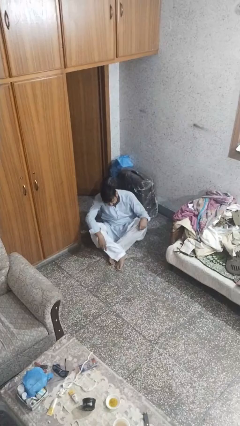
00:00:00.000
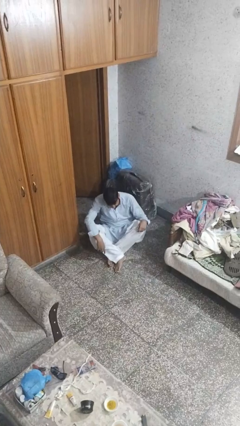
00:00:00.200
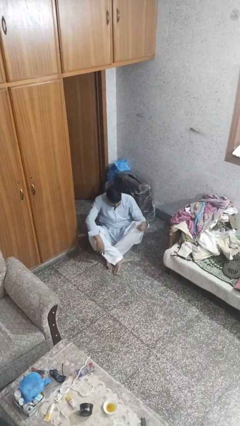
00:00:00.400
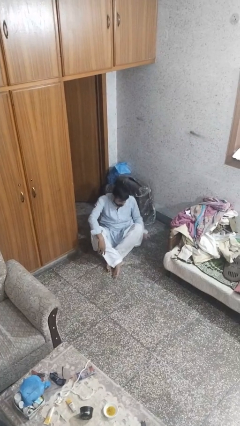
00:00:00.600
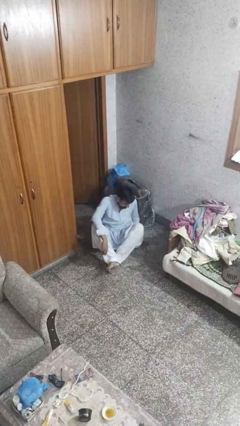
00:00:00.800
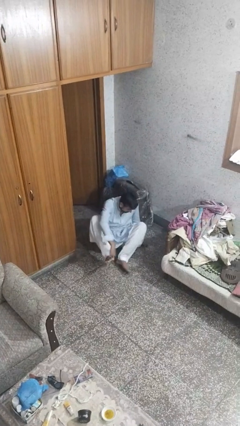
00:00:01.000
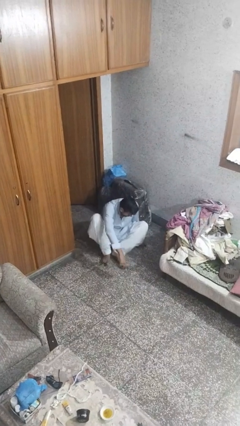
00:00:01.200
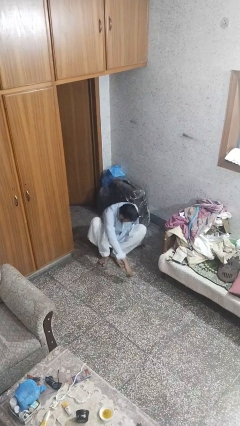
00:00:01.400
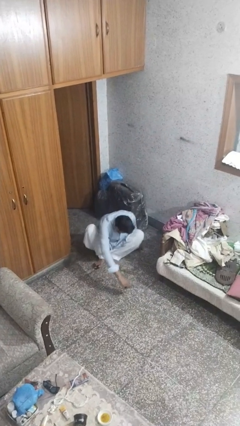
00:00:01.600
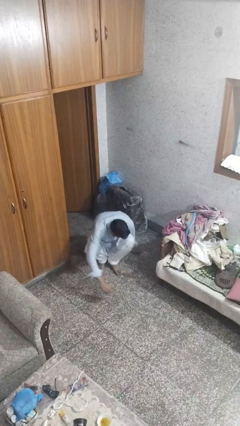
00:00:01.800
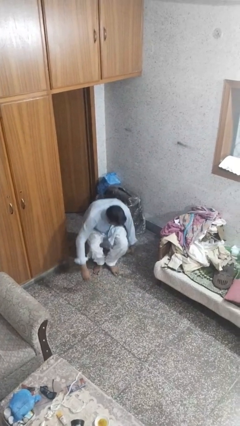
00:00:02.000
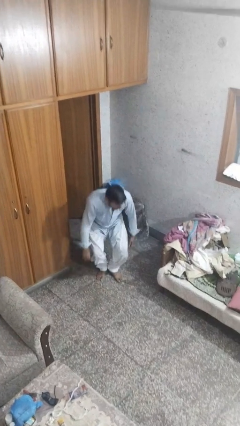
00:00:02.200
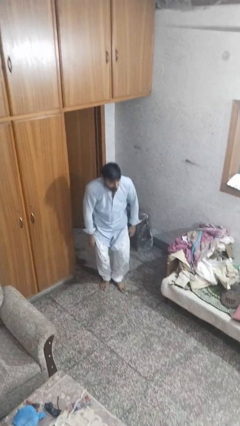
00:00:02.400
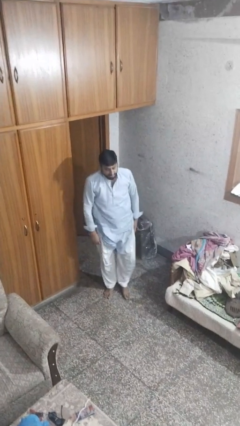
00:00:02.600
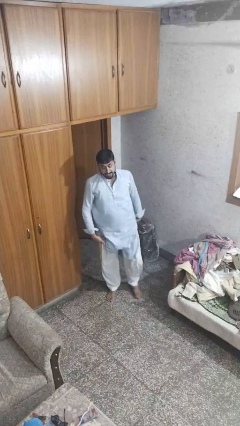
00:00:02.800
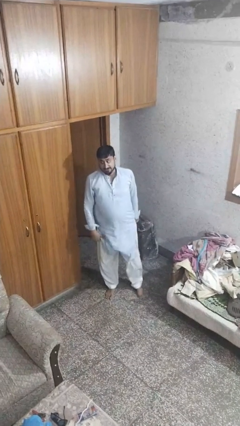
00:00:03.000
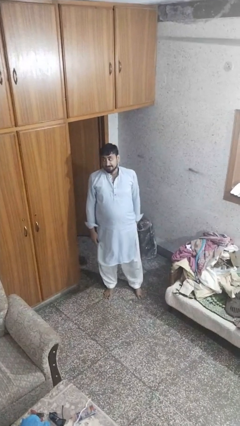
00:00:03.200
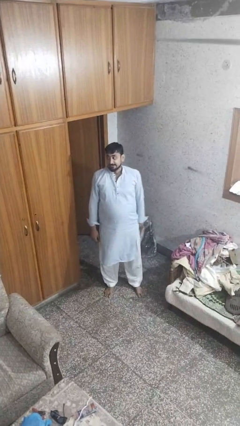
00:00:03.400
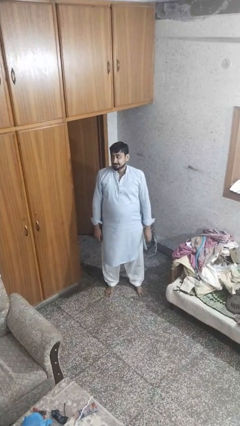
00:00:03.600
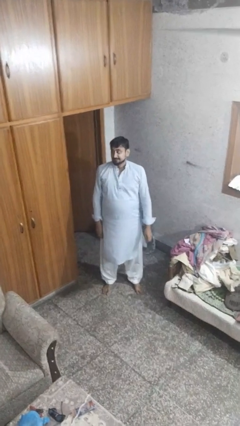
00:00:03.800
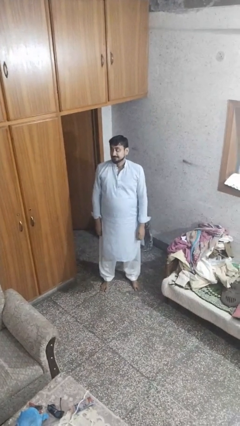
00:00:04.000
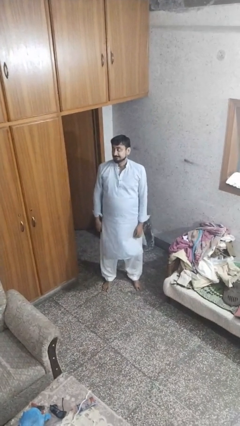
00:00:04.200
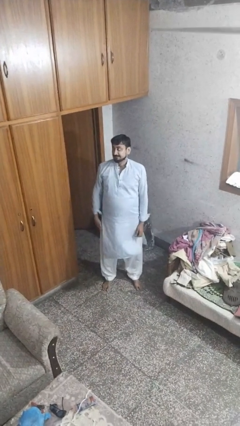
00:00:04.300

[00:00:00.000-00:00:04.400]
person stands up from floor

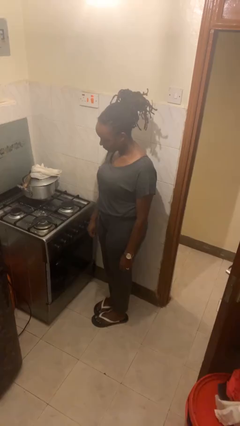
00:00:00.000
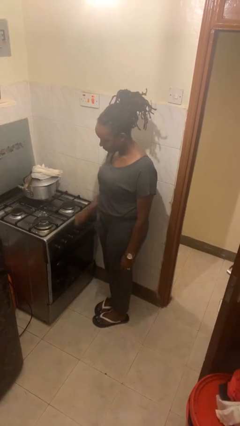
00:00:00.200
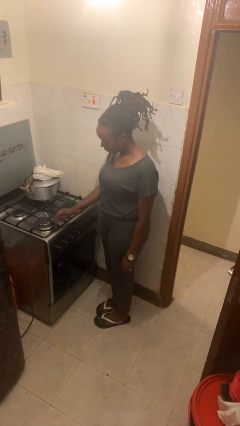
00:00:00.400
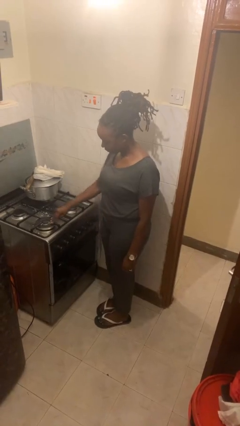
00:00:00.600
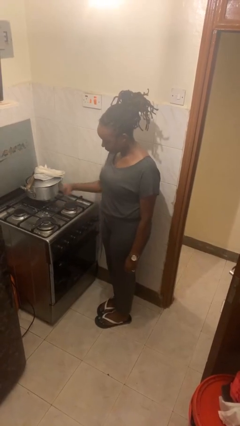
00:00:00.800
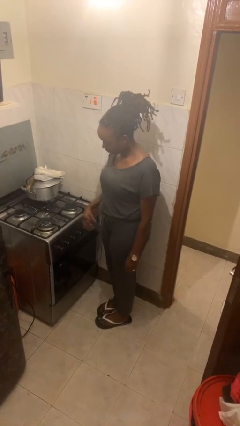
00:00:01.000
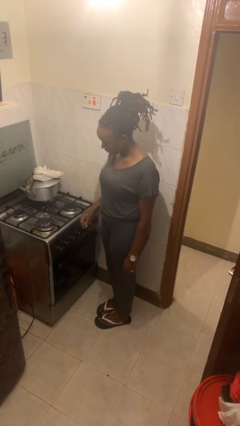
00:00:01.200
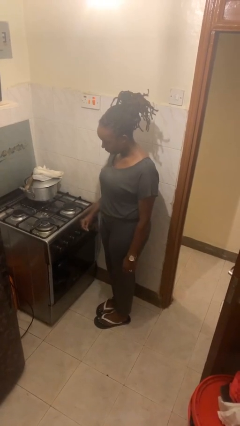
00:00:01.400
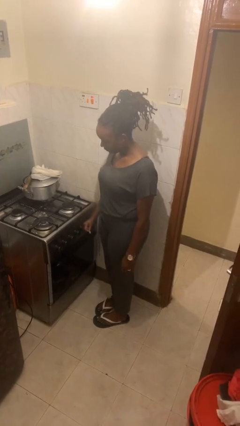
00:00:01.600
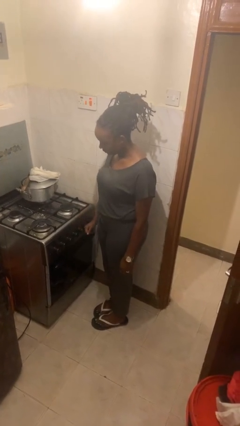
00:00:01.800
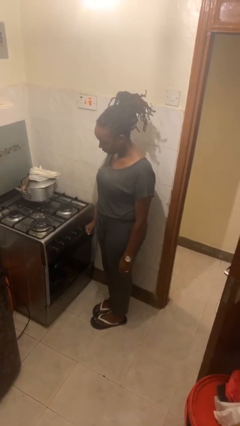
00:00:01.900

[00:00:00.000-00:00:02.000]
person burns hand

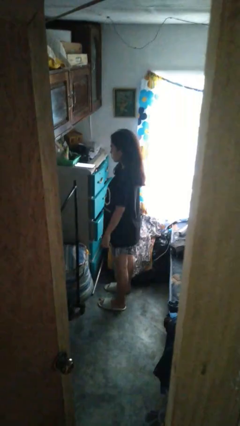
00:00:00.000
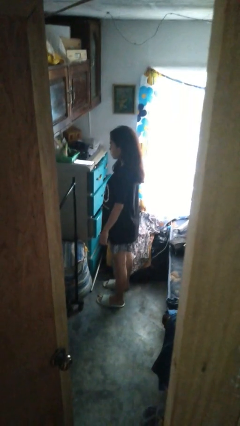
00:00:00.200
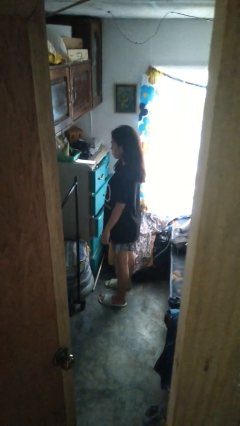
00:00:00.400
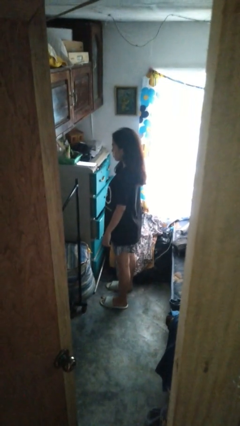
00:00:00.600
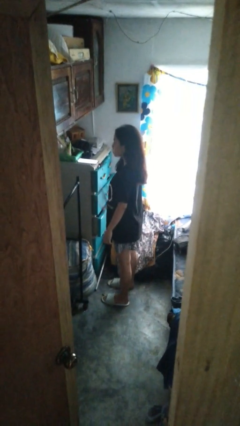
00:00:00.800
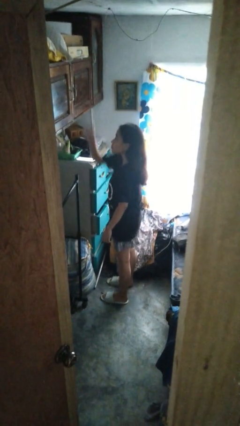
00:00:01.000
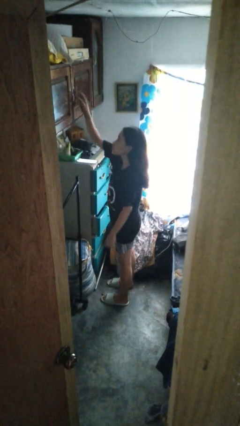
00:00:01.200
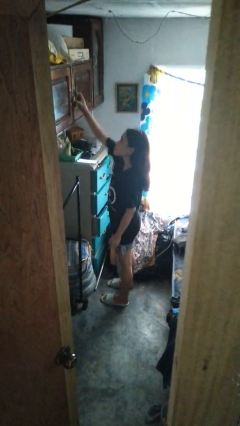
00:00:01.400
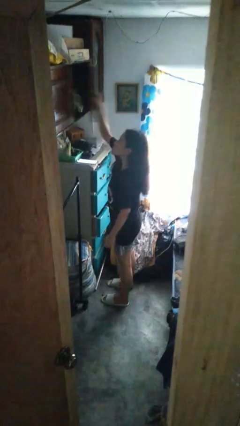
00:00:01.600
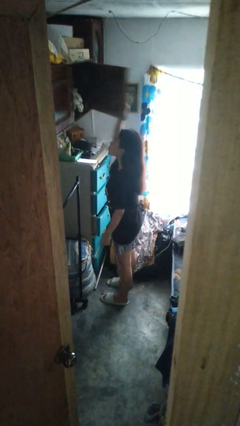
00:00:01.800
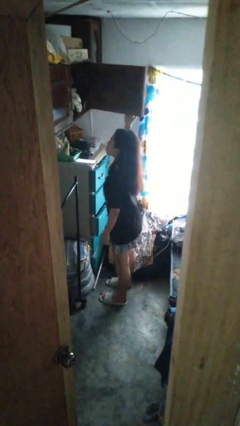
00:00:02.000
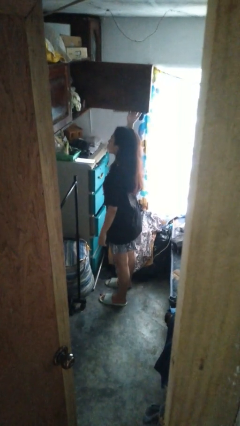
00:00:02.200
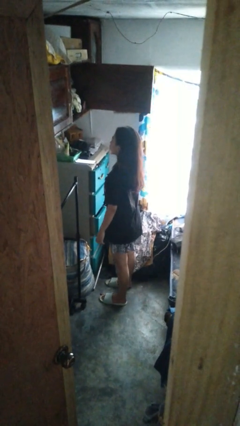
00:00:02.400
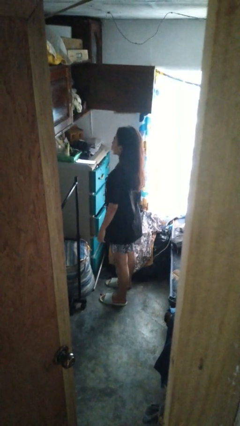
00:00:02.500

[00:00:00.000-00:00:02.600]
person opens closet door

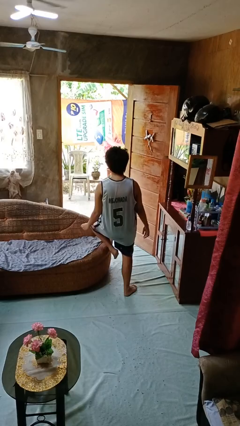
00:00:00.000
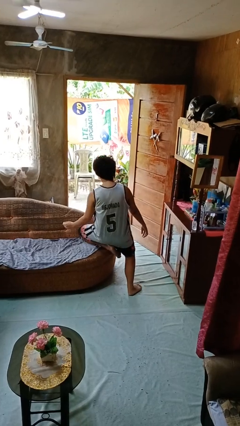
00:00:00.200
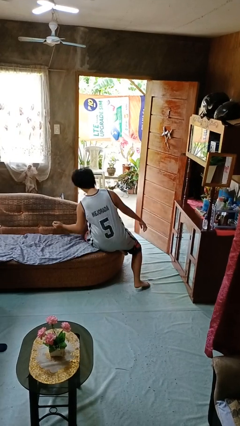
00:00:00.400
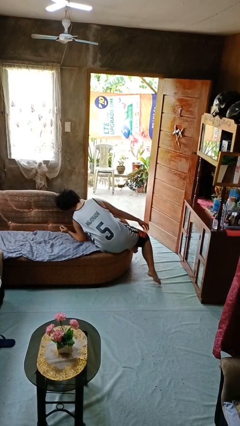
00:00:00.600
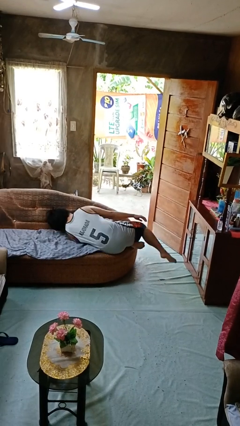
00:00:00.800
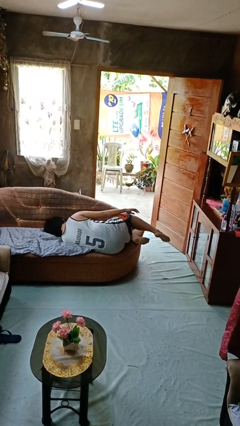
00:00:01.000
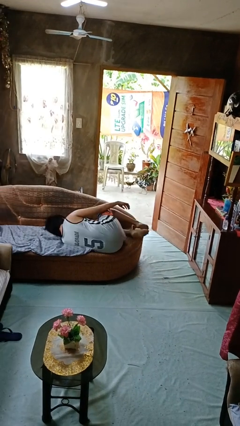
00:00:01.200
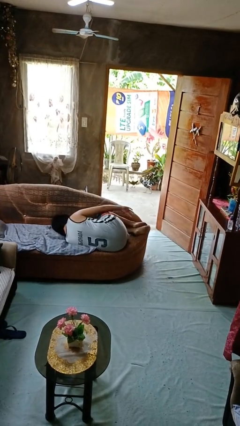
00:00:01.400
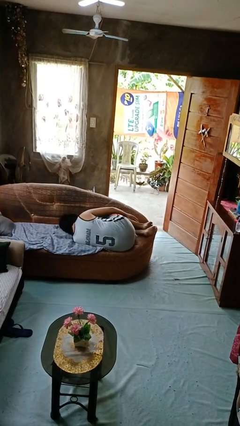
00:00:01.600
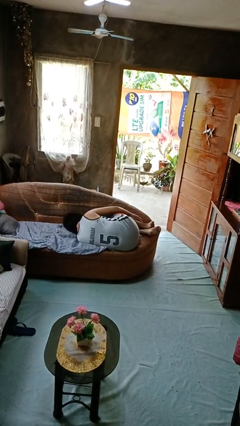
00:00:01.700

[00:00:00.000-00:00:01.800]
person lies down on couch

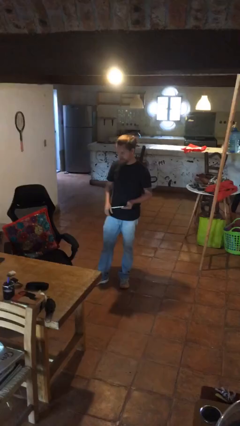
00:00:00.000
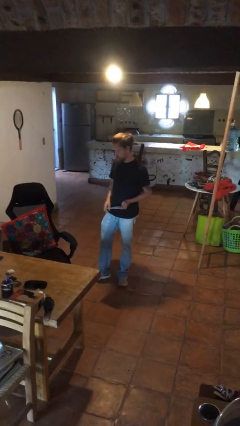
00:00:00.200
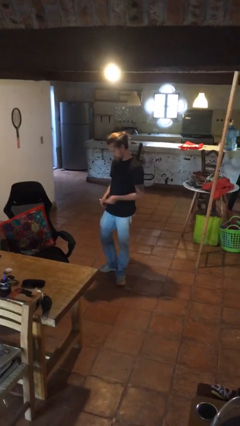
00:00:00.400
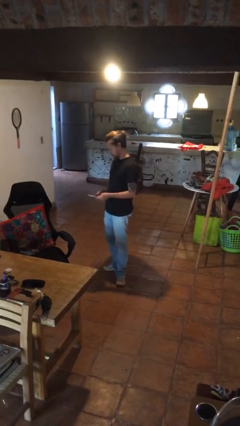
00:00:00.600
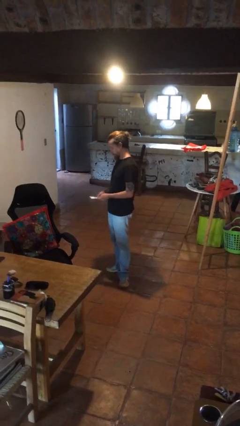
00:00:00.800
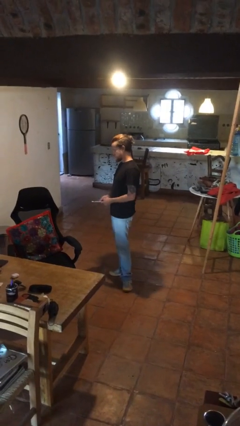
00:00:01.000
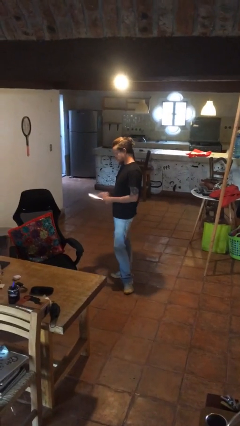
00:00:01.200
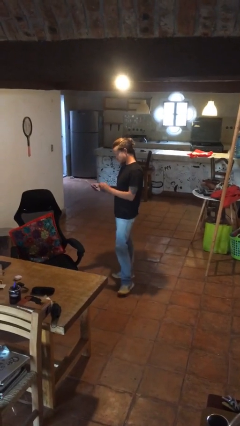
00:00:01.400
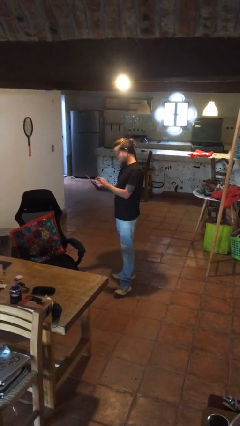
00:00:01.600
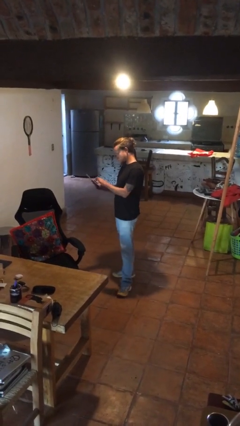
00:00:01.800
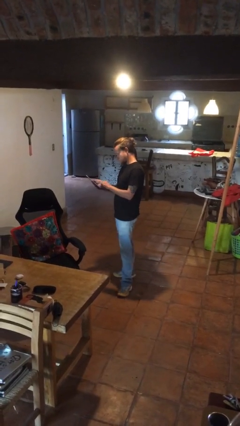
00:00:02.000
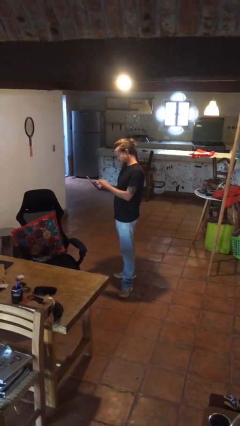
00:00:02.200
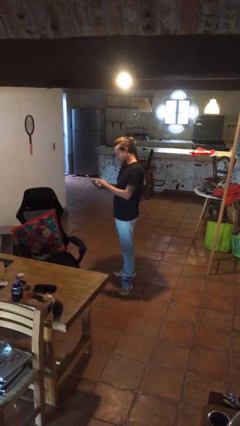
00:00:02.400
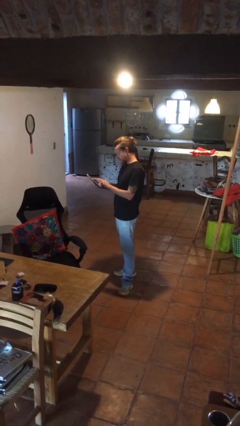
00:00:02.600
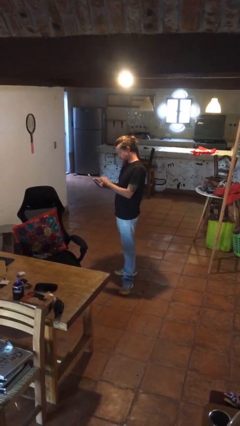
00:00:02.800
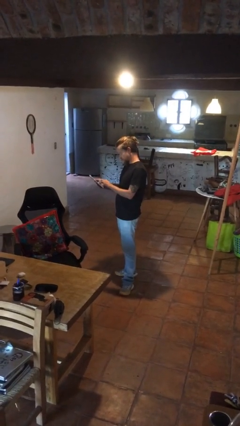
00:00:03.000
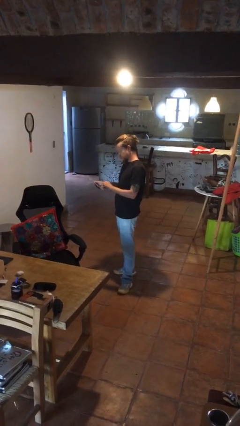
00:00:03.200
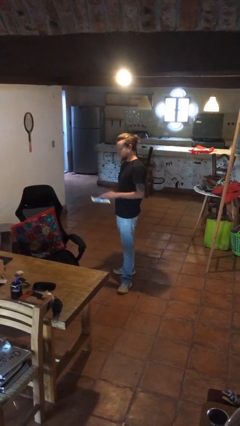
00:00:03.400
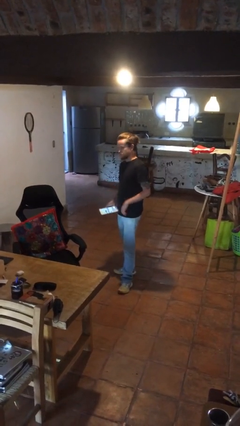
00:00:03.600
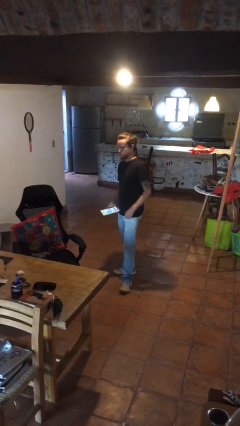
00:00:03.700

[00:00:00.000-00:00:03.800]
person interacts with tablet

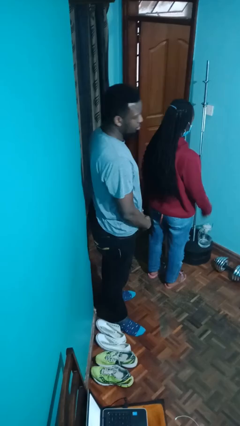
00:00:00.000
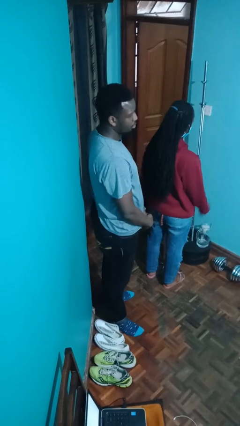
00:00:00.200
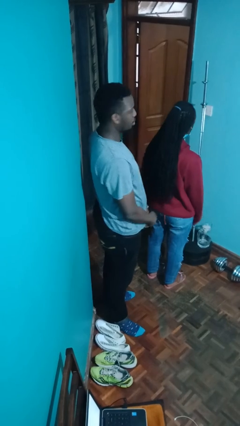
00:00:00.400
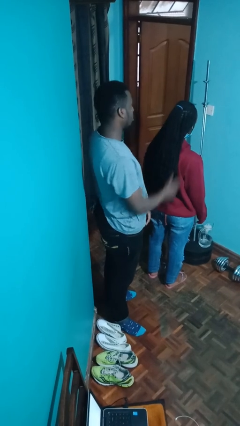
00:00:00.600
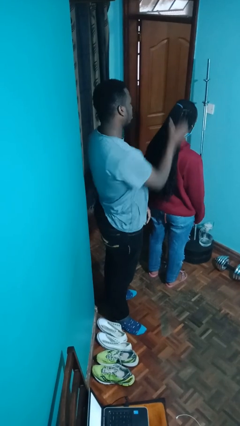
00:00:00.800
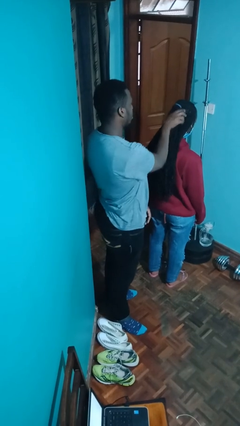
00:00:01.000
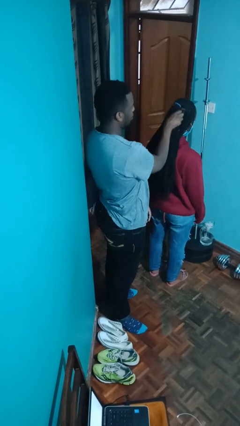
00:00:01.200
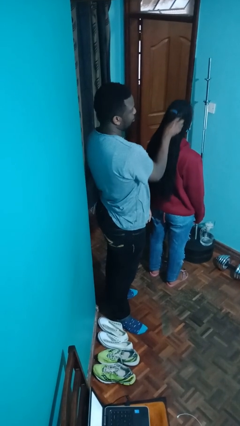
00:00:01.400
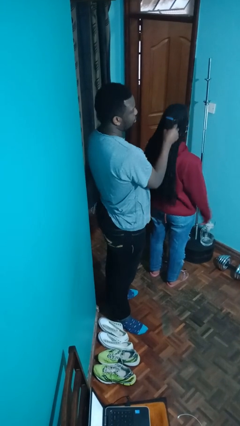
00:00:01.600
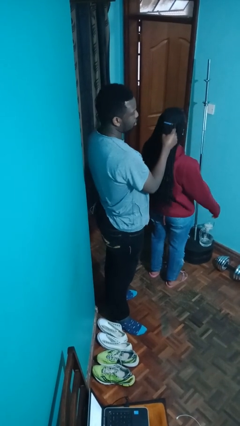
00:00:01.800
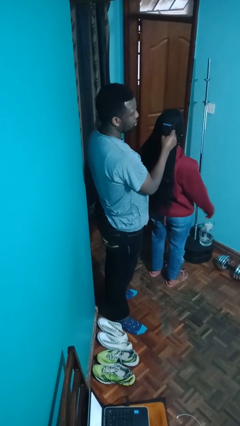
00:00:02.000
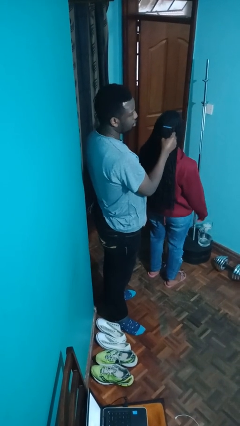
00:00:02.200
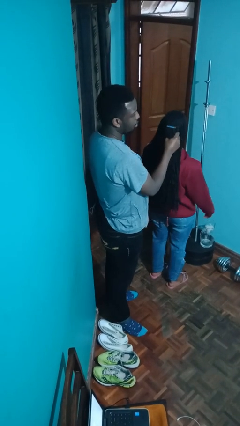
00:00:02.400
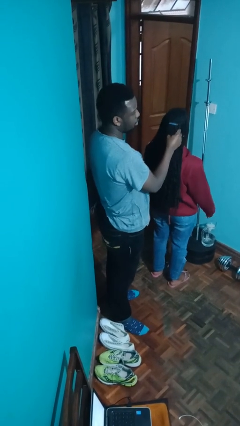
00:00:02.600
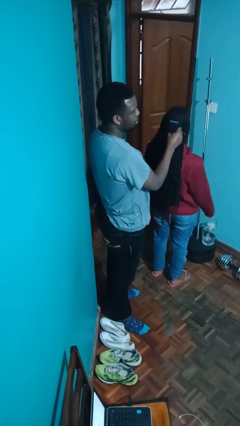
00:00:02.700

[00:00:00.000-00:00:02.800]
person grabs person by hair
